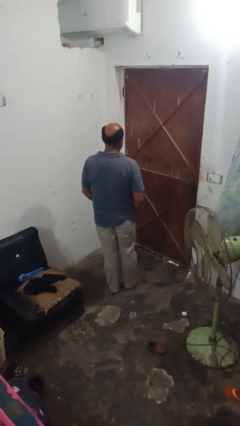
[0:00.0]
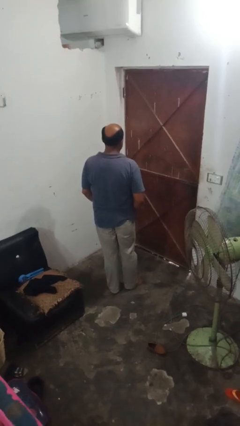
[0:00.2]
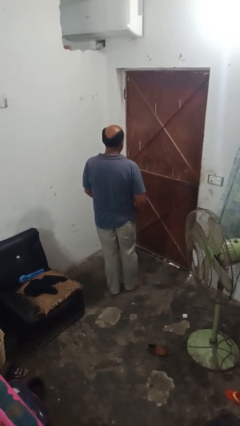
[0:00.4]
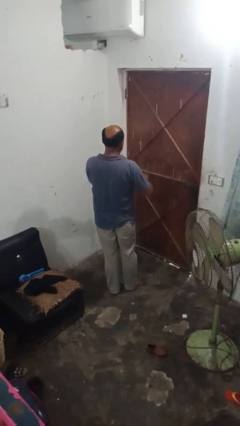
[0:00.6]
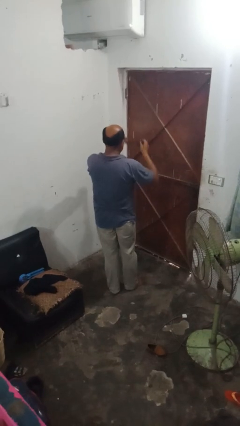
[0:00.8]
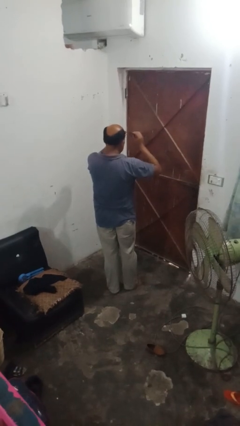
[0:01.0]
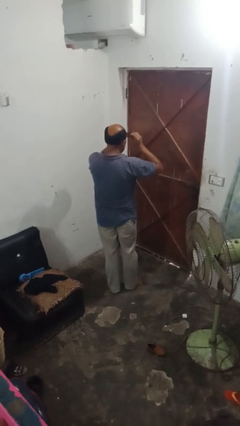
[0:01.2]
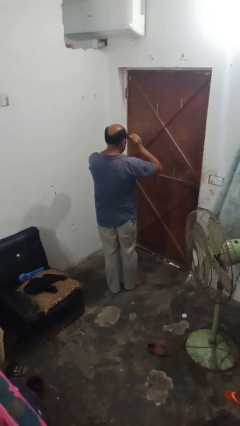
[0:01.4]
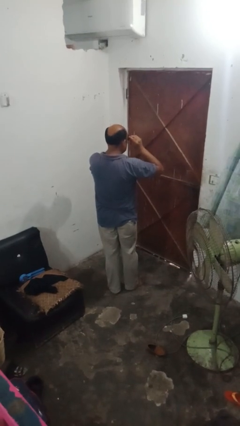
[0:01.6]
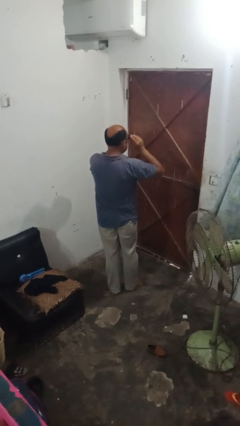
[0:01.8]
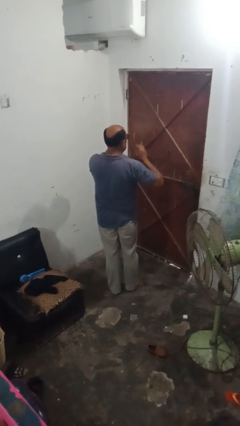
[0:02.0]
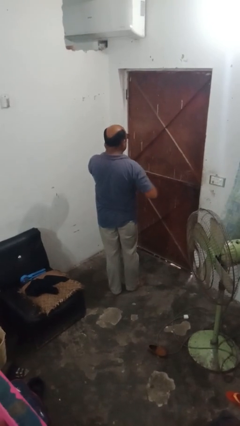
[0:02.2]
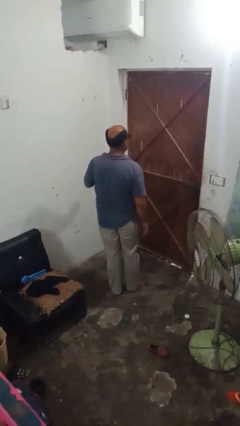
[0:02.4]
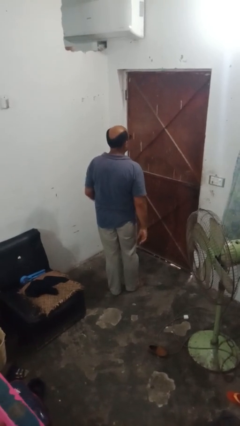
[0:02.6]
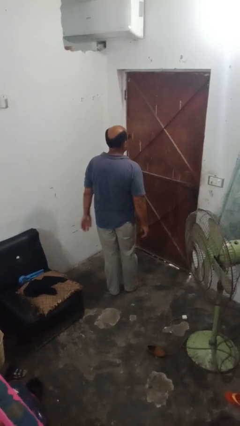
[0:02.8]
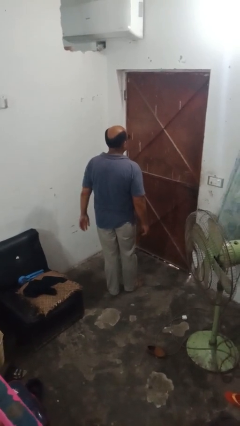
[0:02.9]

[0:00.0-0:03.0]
person puts on sunglasses

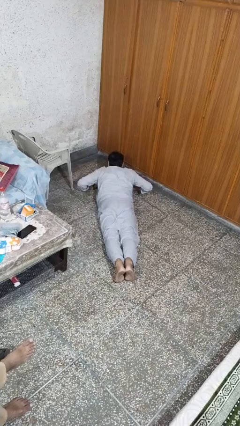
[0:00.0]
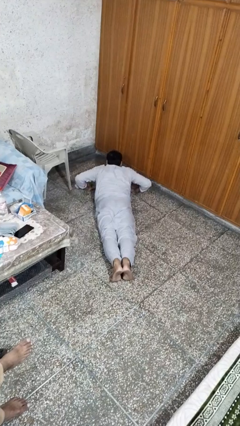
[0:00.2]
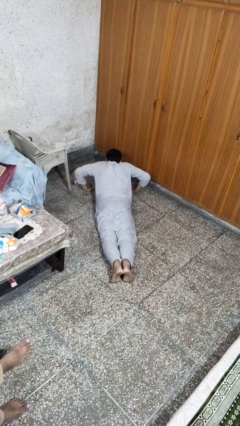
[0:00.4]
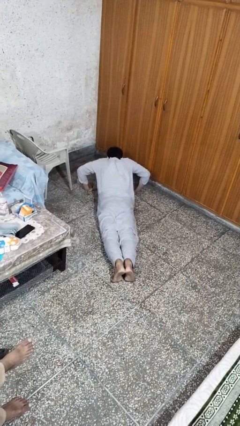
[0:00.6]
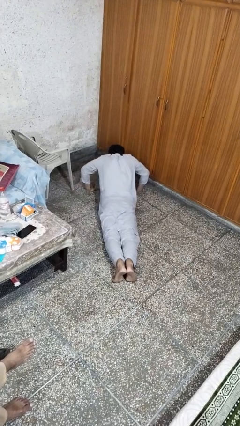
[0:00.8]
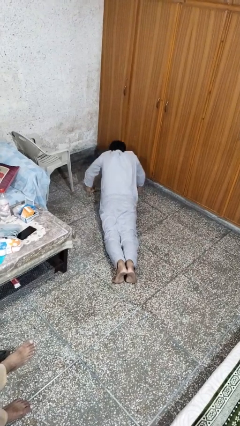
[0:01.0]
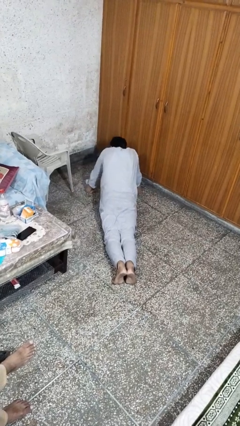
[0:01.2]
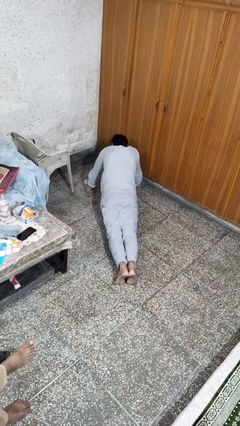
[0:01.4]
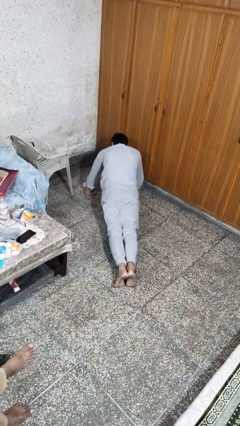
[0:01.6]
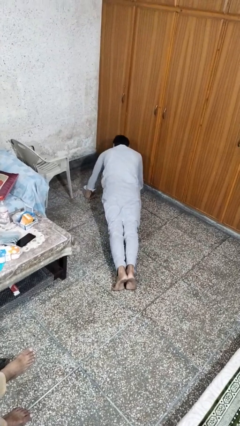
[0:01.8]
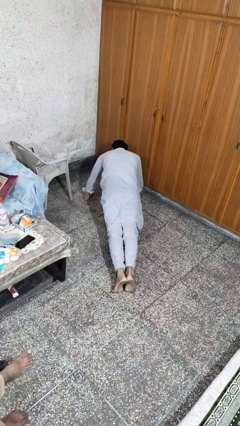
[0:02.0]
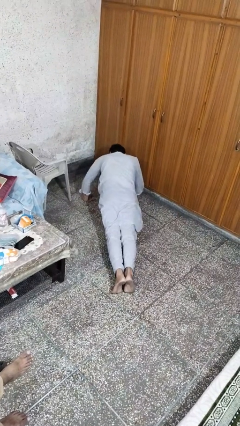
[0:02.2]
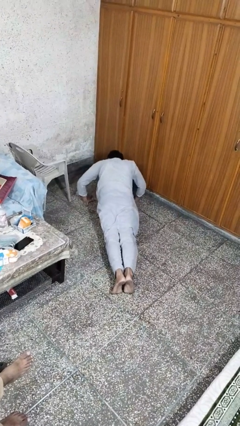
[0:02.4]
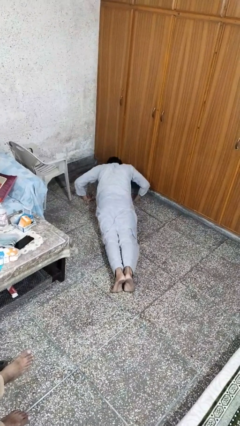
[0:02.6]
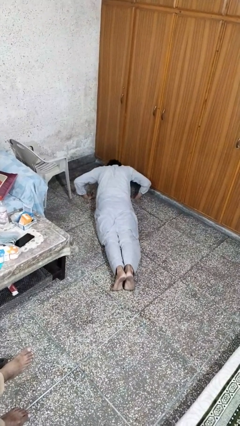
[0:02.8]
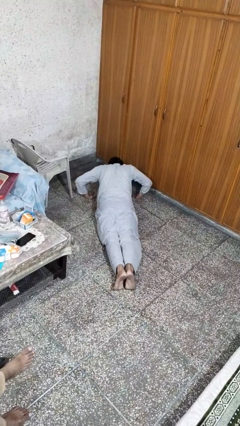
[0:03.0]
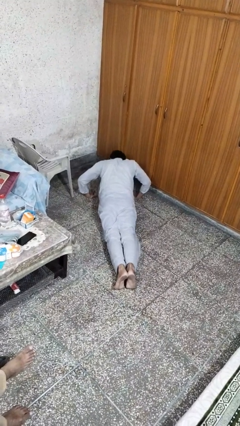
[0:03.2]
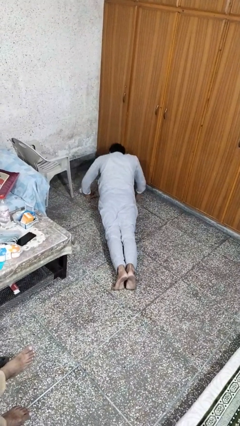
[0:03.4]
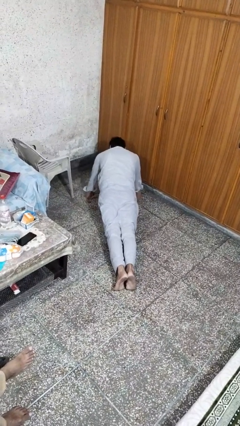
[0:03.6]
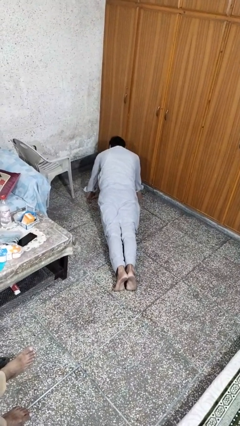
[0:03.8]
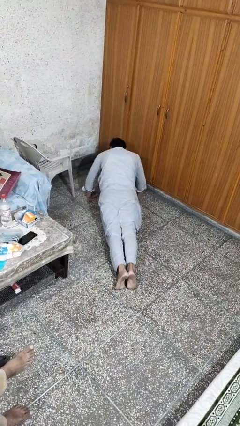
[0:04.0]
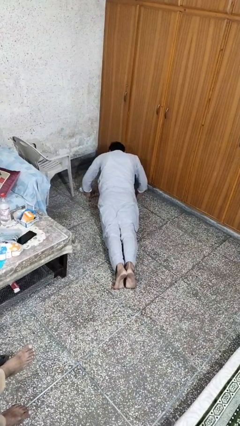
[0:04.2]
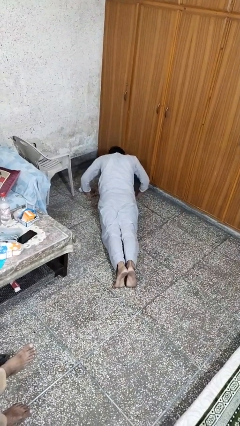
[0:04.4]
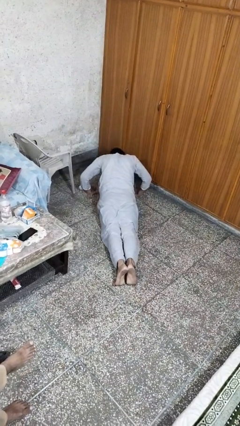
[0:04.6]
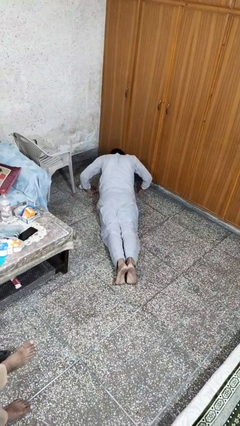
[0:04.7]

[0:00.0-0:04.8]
person exercises with pushup

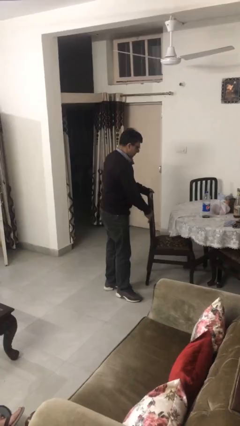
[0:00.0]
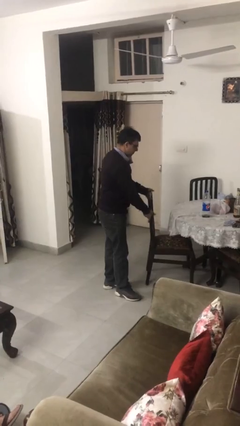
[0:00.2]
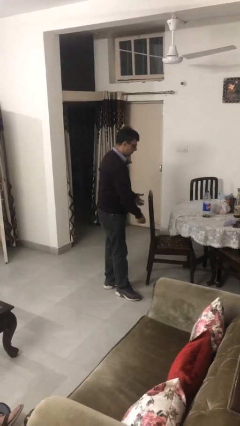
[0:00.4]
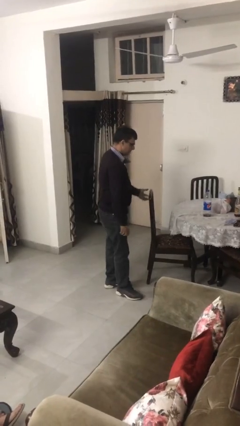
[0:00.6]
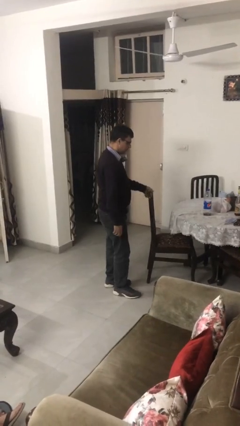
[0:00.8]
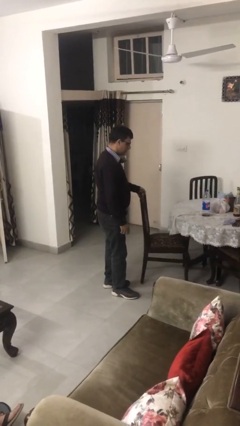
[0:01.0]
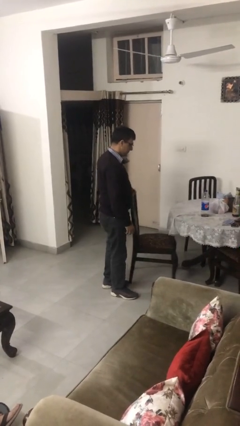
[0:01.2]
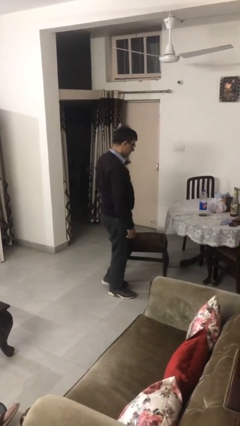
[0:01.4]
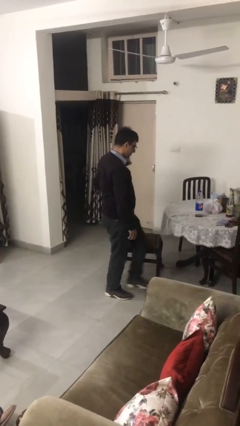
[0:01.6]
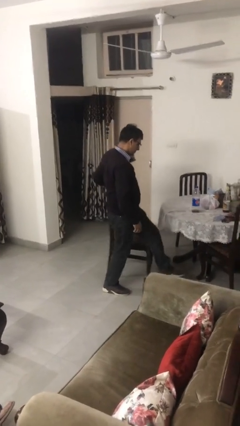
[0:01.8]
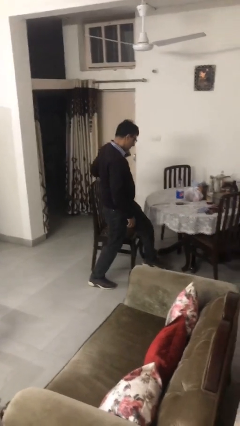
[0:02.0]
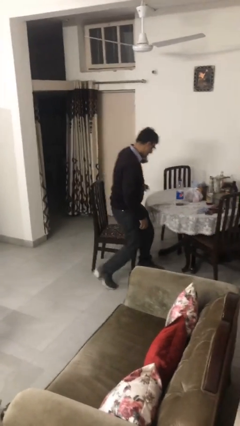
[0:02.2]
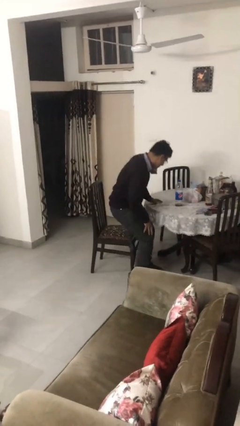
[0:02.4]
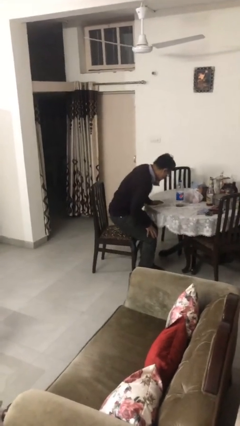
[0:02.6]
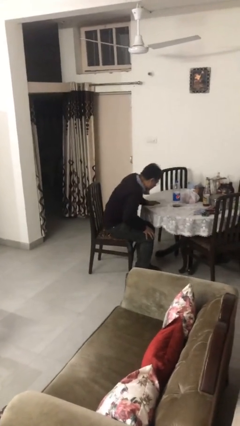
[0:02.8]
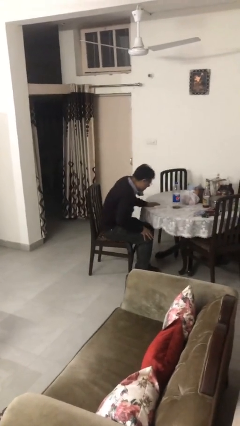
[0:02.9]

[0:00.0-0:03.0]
person sits down

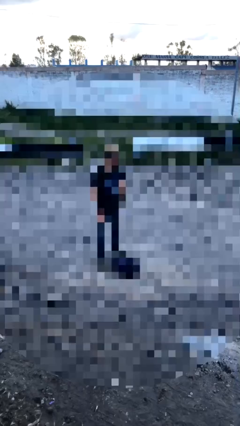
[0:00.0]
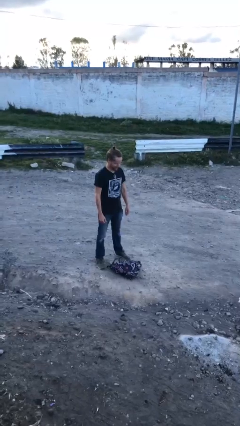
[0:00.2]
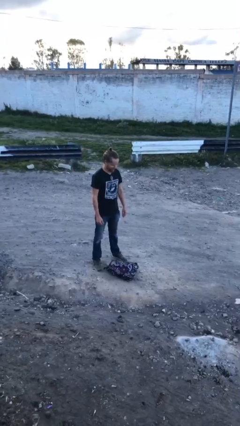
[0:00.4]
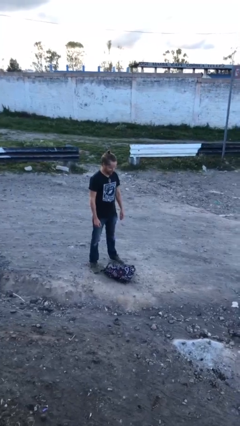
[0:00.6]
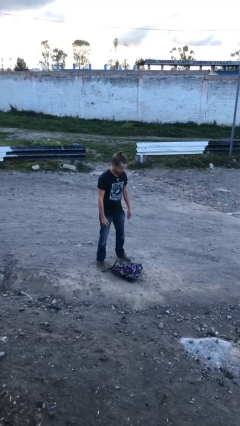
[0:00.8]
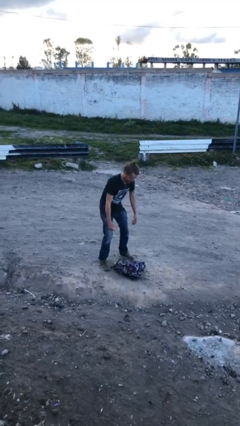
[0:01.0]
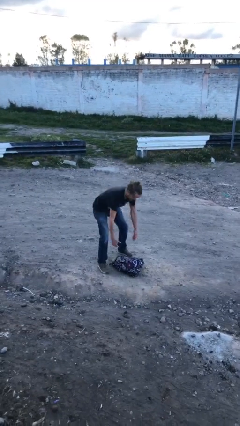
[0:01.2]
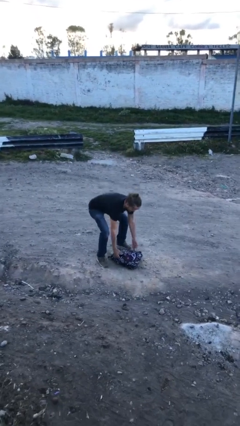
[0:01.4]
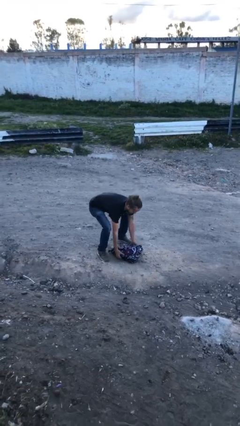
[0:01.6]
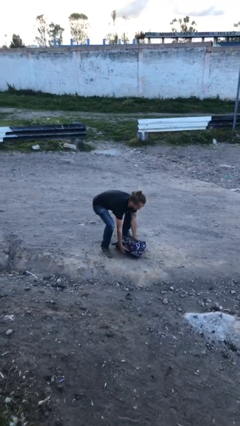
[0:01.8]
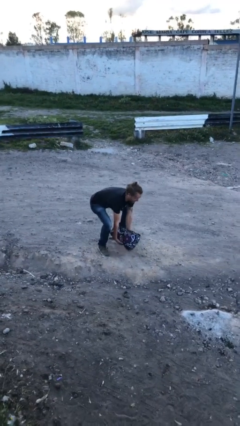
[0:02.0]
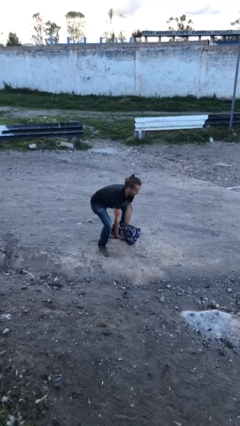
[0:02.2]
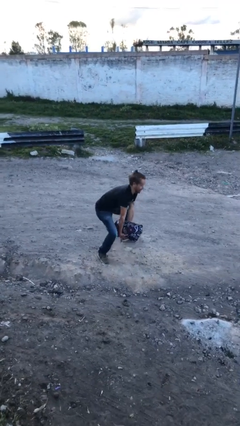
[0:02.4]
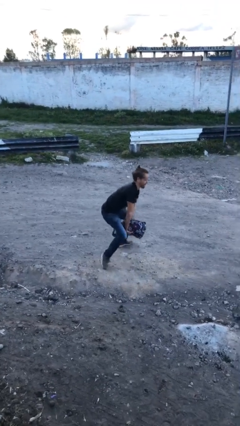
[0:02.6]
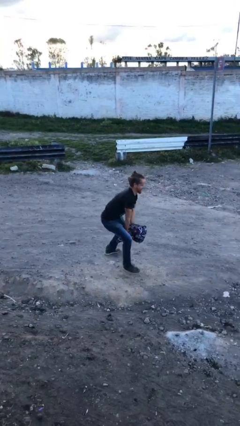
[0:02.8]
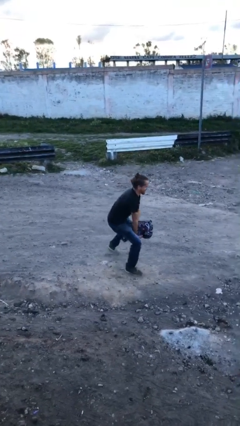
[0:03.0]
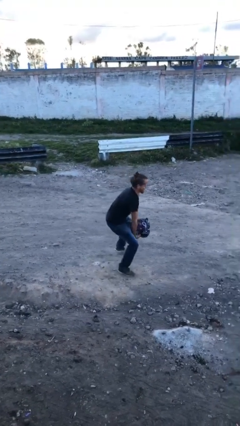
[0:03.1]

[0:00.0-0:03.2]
person picks up object from floor

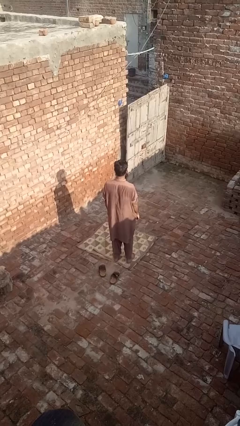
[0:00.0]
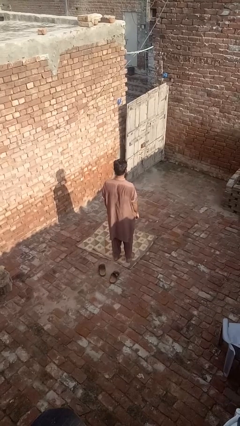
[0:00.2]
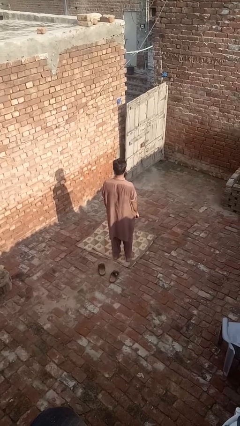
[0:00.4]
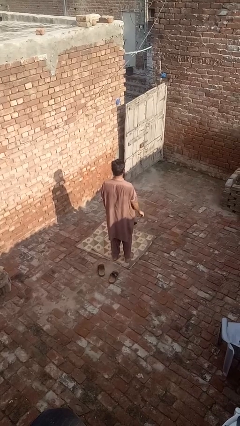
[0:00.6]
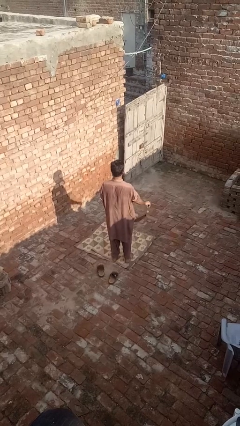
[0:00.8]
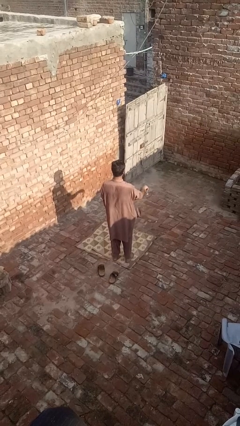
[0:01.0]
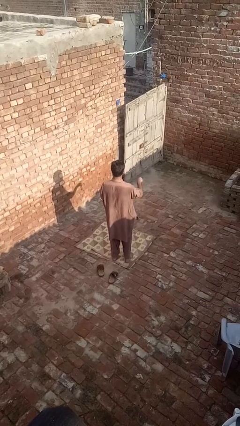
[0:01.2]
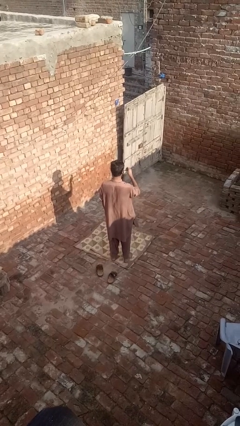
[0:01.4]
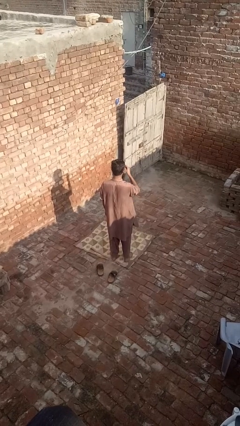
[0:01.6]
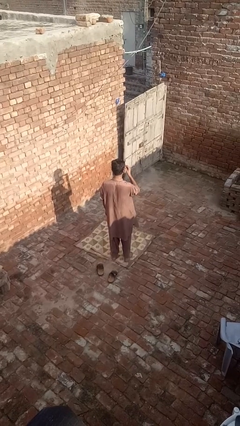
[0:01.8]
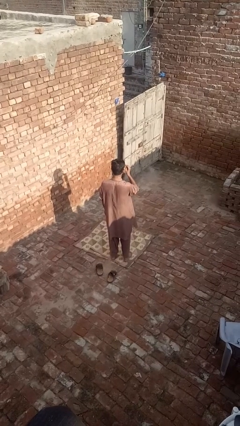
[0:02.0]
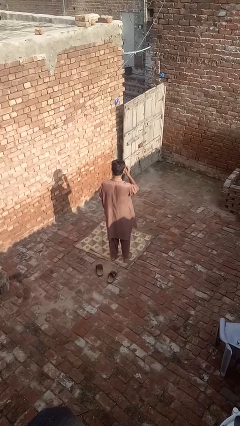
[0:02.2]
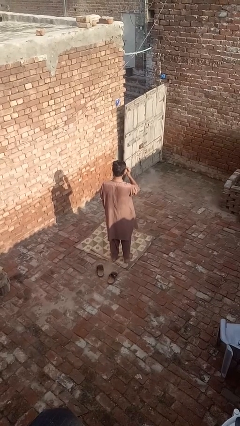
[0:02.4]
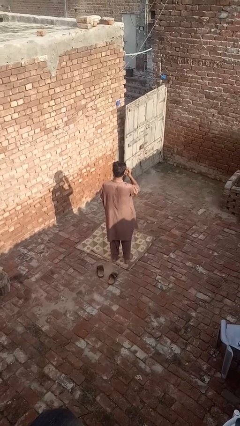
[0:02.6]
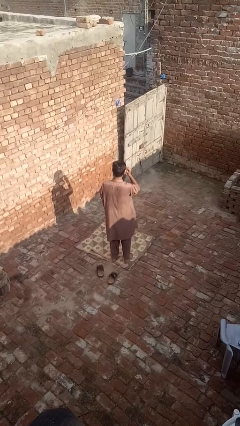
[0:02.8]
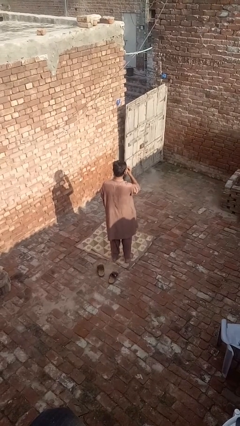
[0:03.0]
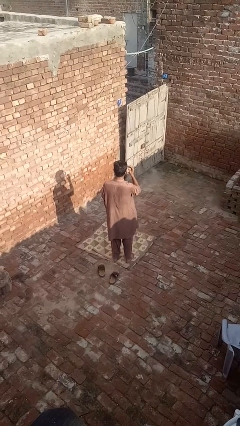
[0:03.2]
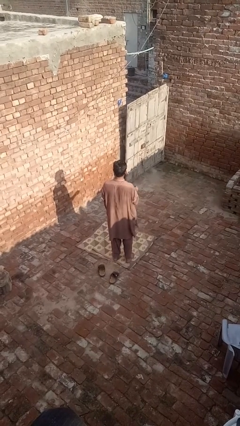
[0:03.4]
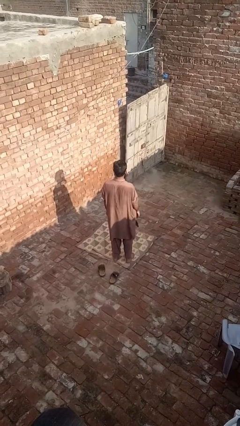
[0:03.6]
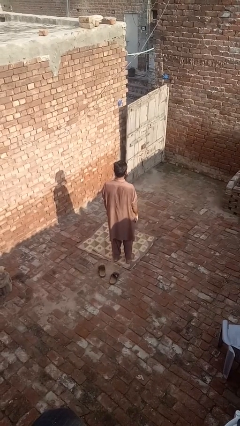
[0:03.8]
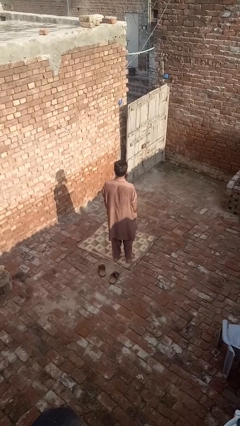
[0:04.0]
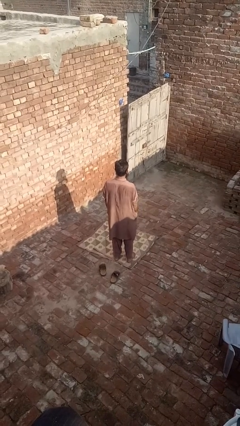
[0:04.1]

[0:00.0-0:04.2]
person puts on glasses
